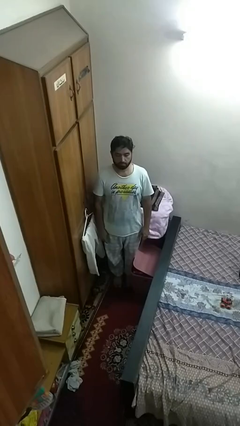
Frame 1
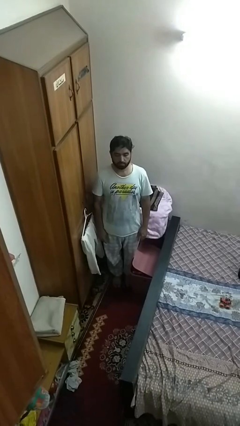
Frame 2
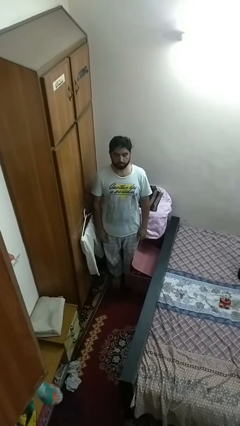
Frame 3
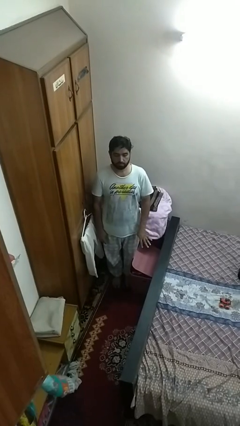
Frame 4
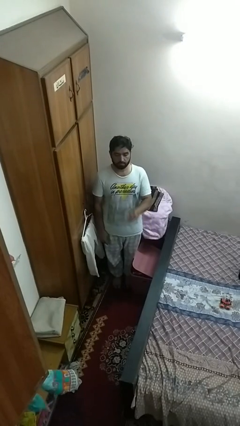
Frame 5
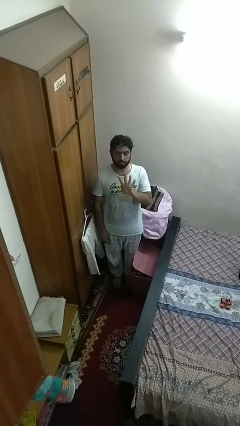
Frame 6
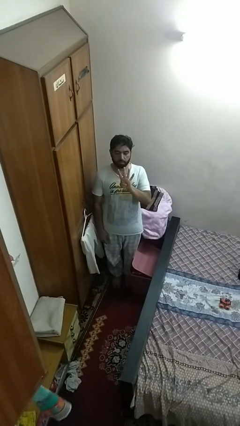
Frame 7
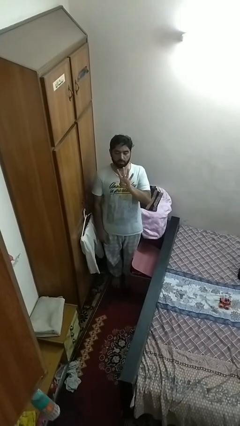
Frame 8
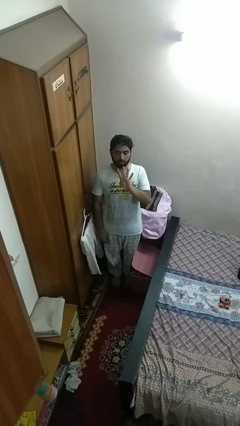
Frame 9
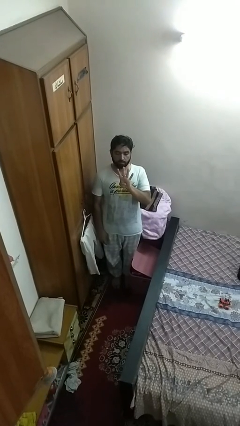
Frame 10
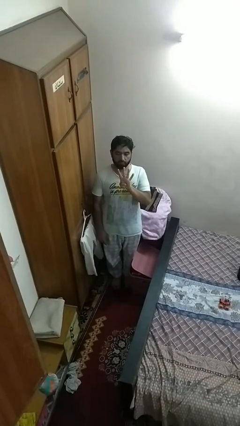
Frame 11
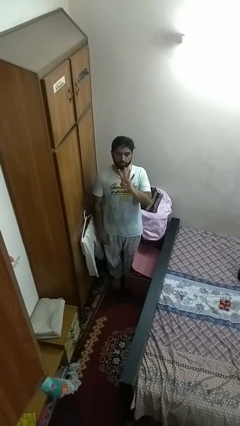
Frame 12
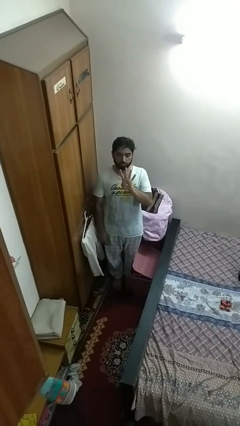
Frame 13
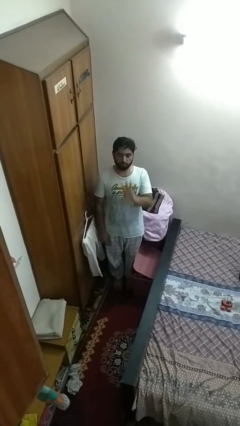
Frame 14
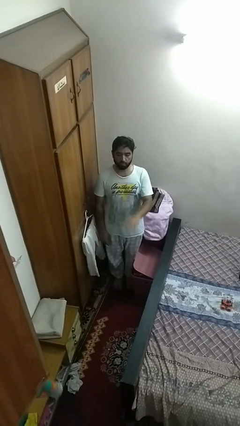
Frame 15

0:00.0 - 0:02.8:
person gestures number four

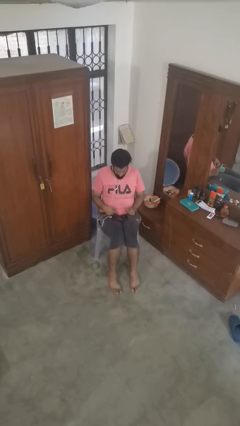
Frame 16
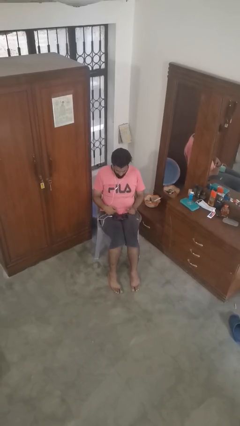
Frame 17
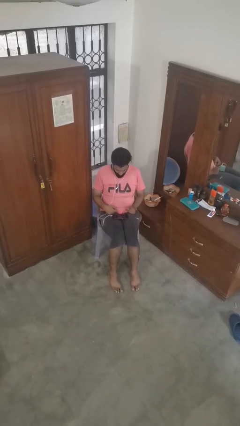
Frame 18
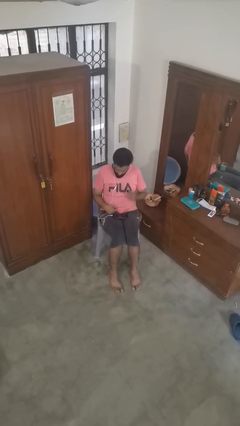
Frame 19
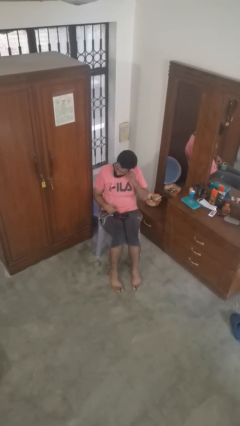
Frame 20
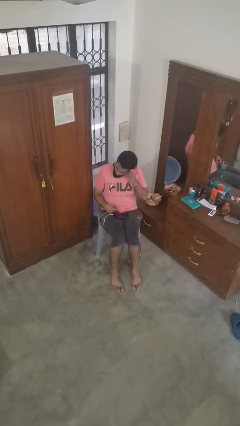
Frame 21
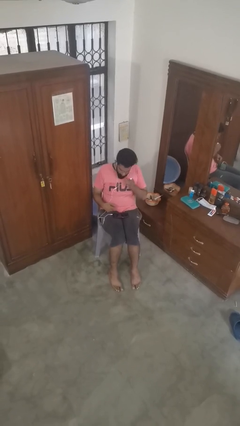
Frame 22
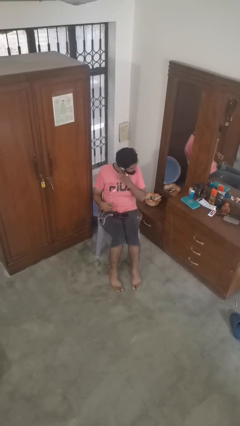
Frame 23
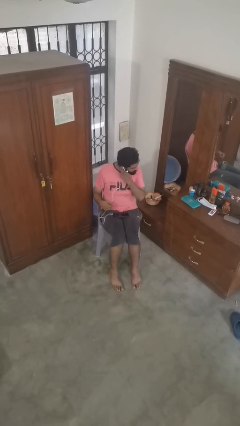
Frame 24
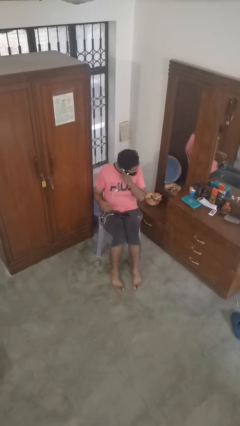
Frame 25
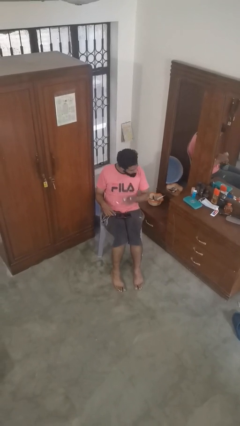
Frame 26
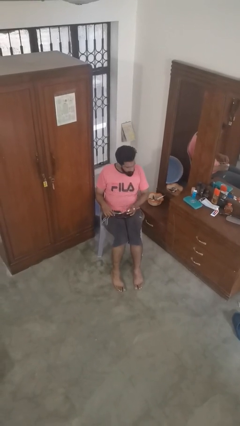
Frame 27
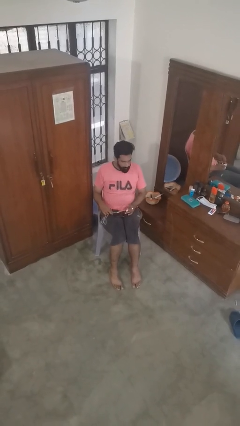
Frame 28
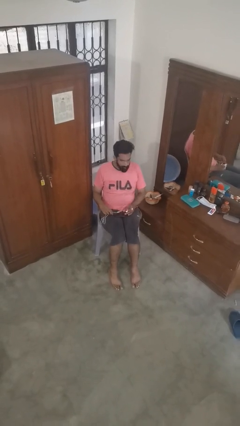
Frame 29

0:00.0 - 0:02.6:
person takes off headphones

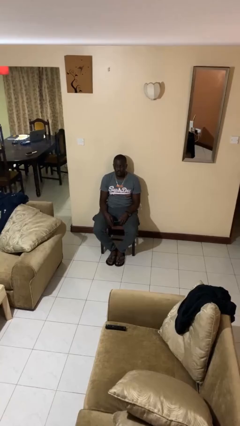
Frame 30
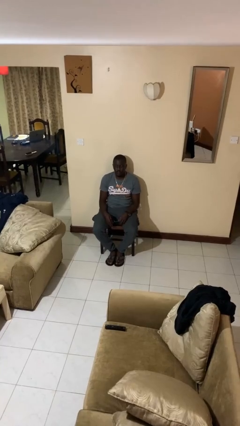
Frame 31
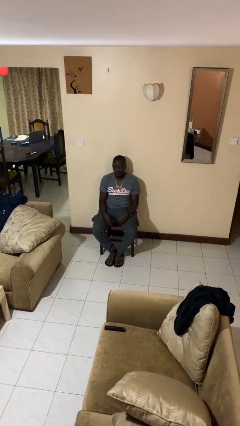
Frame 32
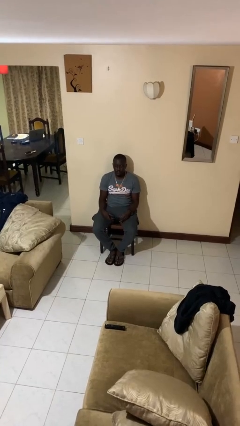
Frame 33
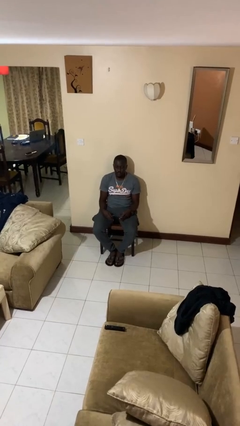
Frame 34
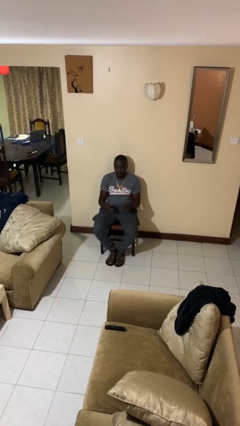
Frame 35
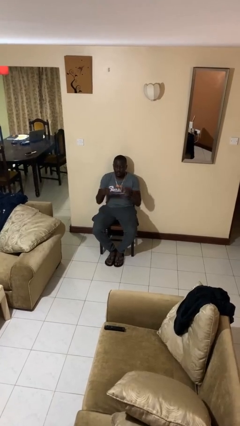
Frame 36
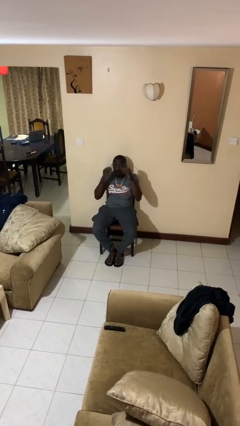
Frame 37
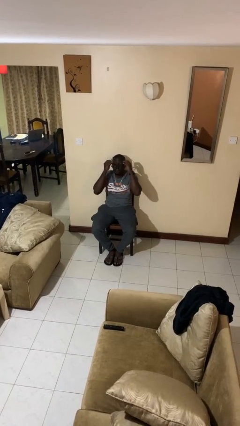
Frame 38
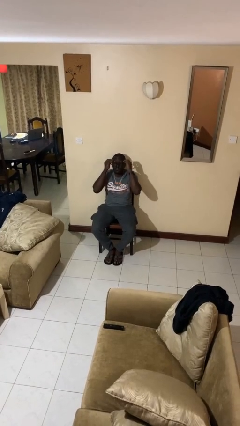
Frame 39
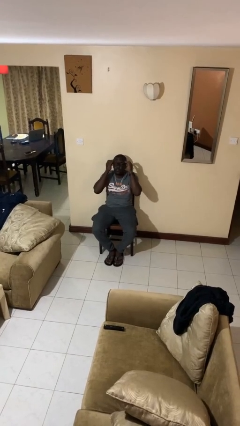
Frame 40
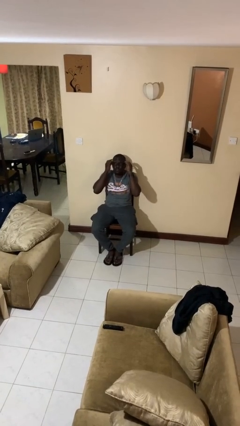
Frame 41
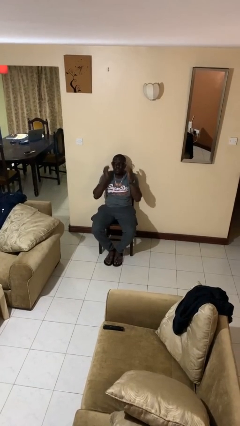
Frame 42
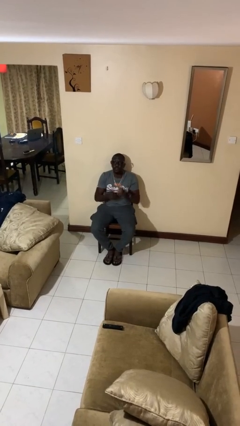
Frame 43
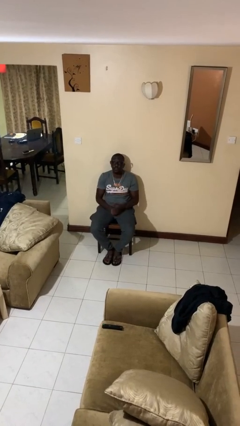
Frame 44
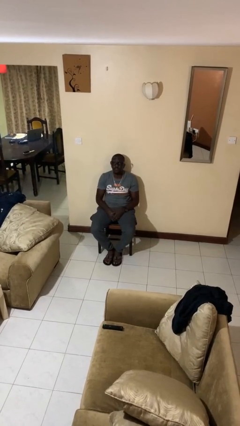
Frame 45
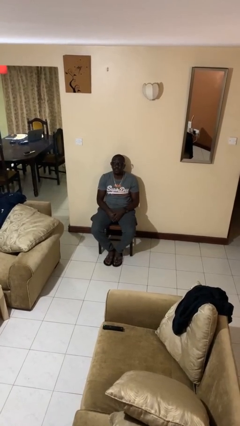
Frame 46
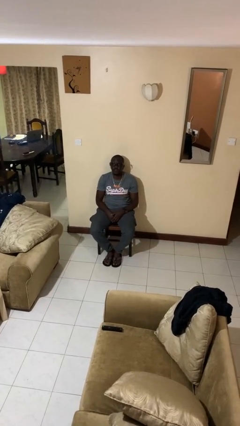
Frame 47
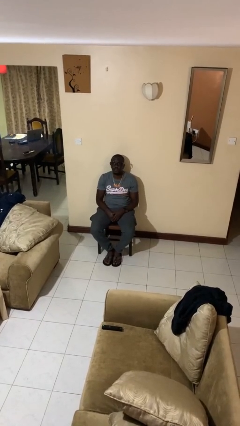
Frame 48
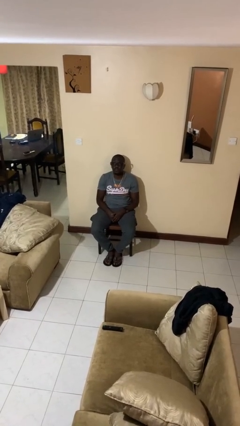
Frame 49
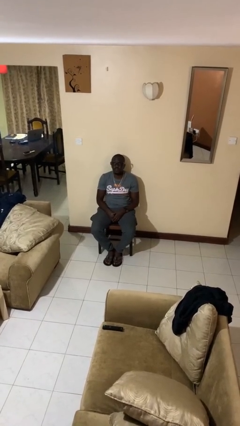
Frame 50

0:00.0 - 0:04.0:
person puts on glasses

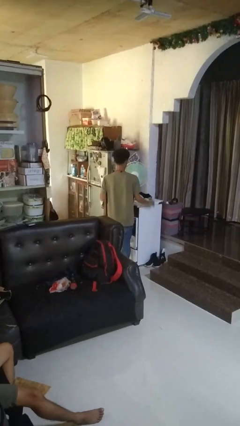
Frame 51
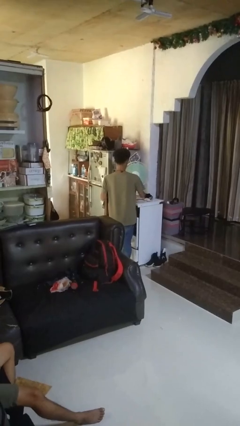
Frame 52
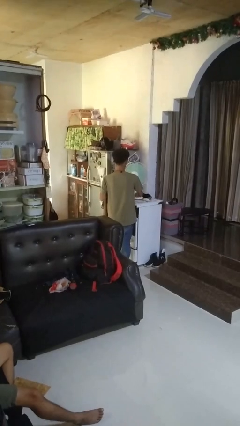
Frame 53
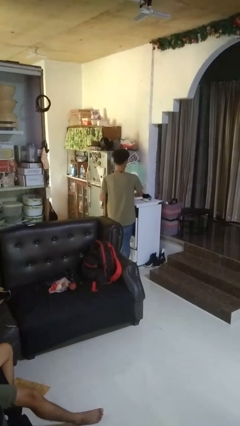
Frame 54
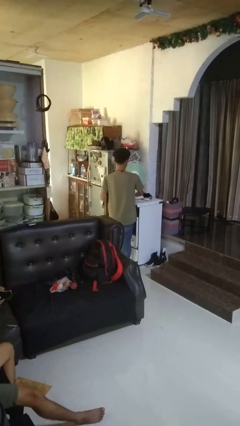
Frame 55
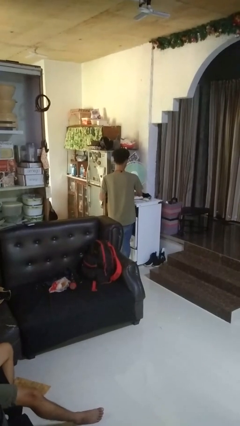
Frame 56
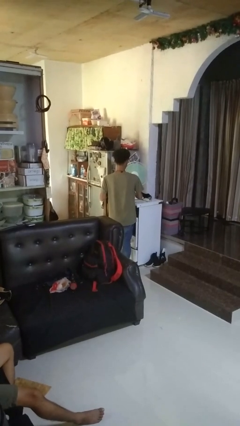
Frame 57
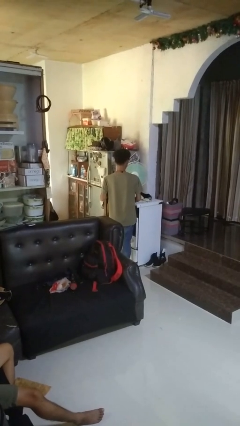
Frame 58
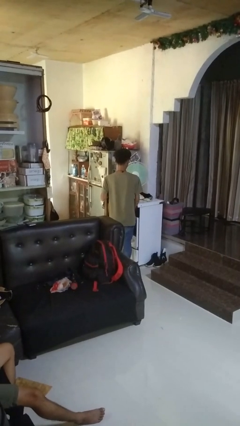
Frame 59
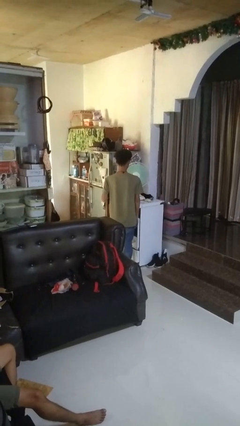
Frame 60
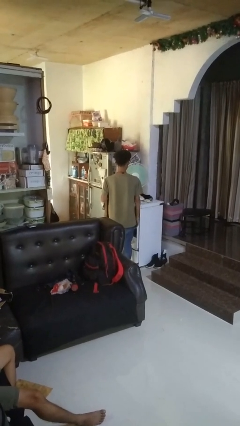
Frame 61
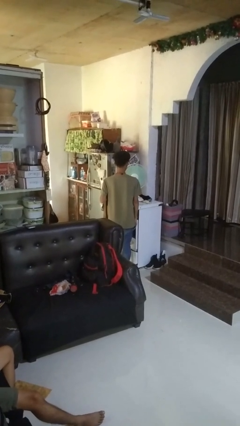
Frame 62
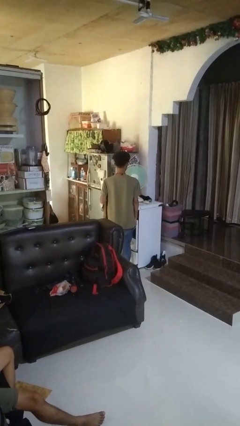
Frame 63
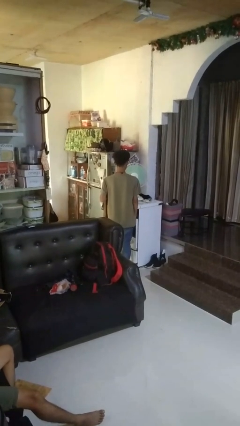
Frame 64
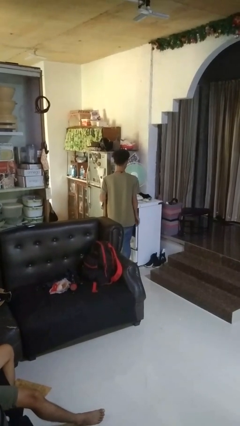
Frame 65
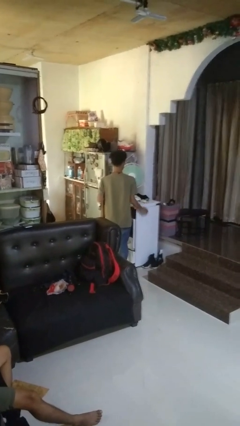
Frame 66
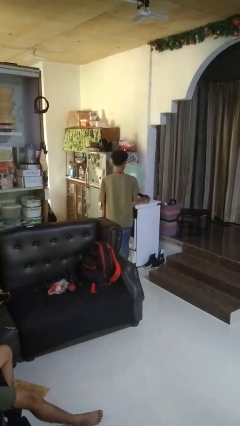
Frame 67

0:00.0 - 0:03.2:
person turns on fan

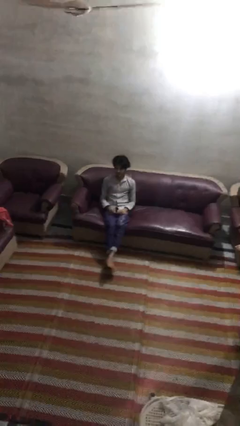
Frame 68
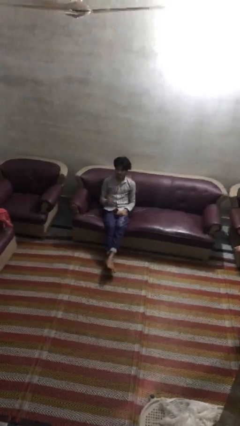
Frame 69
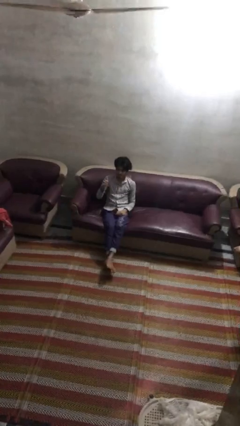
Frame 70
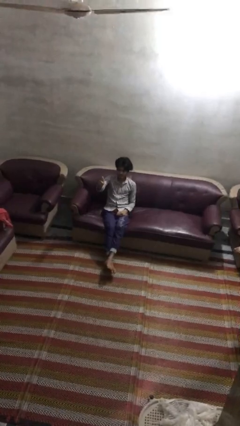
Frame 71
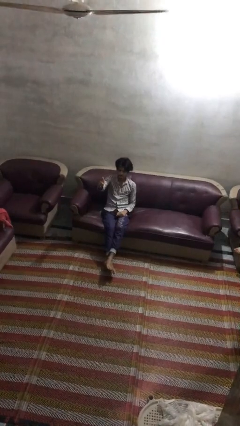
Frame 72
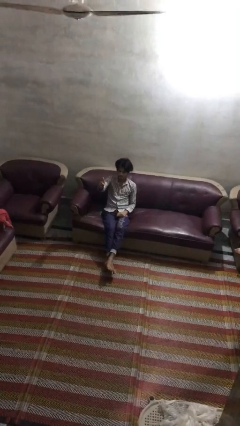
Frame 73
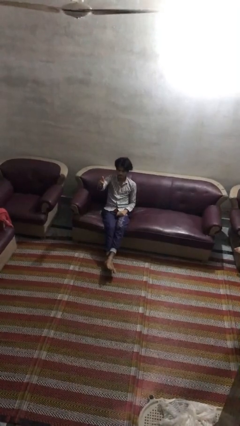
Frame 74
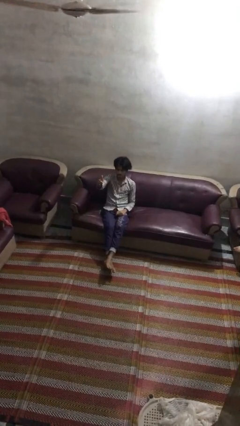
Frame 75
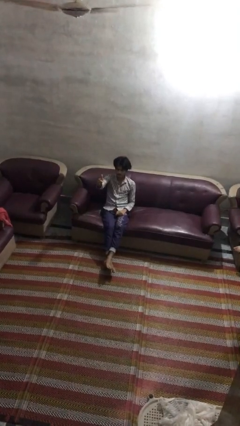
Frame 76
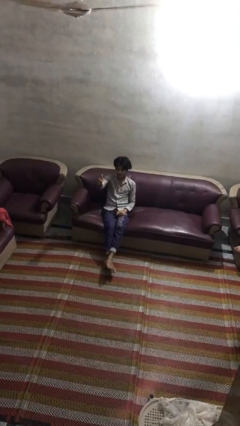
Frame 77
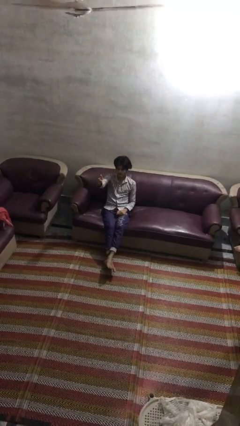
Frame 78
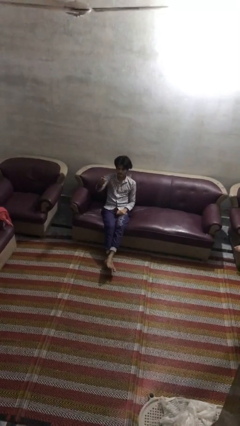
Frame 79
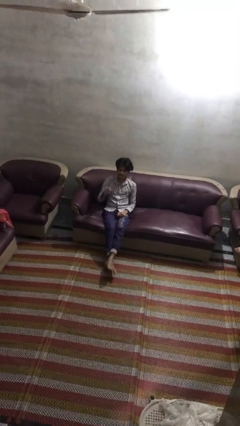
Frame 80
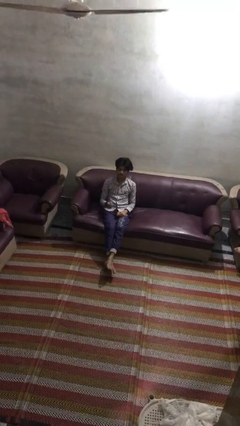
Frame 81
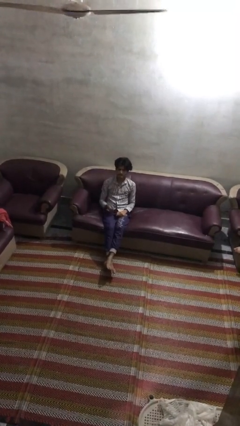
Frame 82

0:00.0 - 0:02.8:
person gestures thumbs up

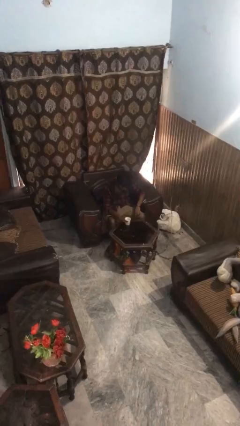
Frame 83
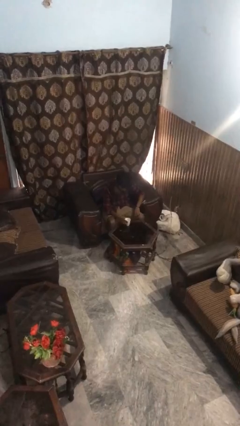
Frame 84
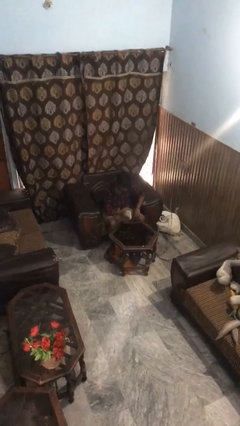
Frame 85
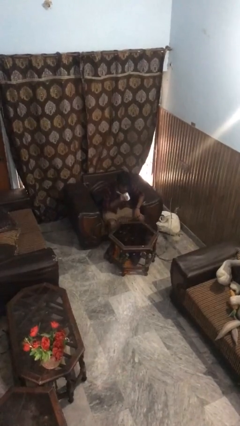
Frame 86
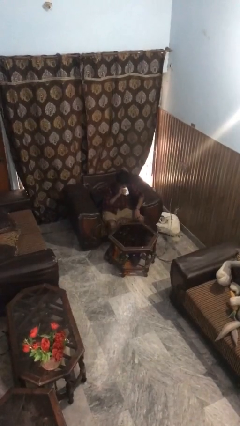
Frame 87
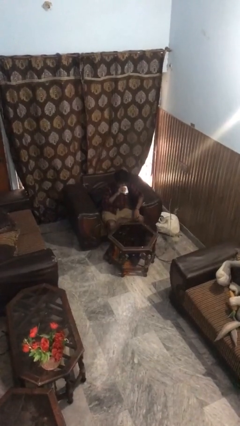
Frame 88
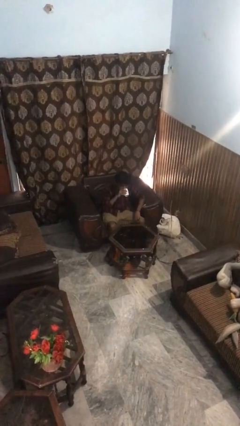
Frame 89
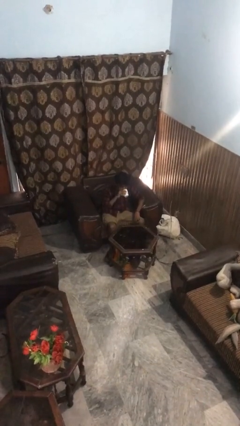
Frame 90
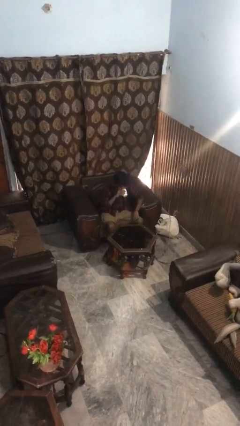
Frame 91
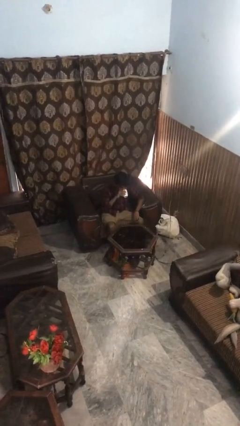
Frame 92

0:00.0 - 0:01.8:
person drinks from mug
